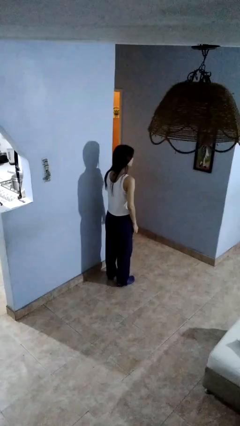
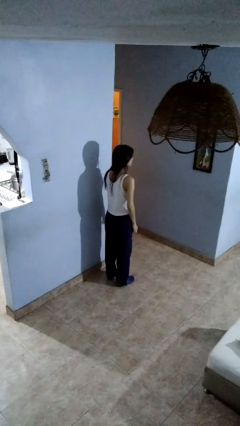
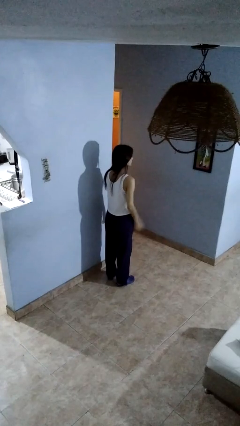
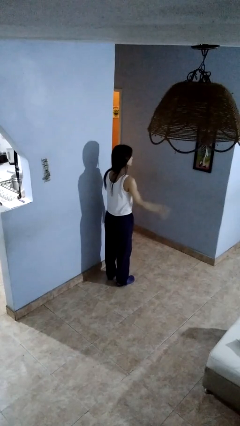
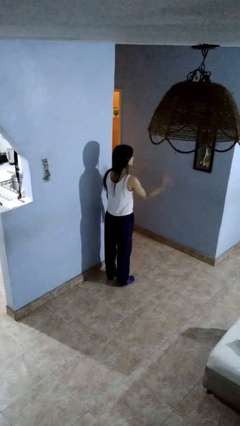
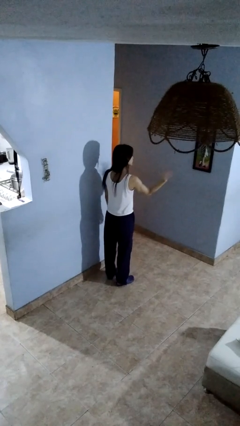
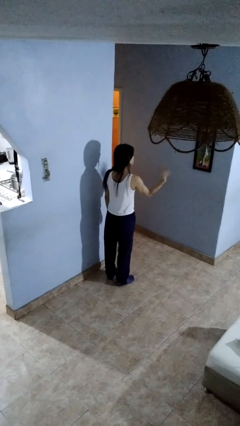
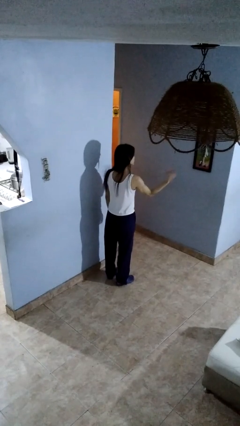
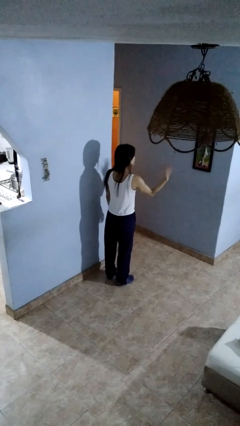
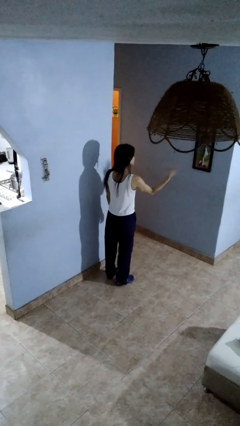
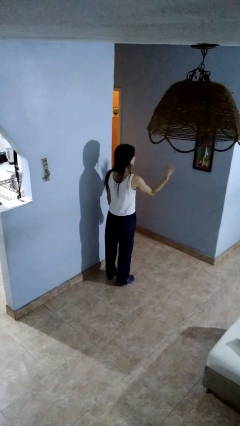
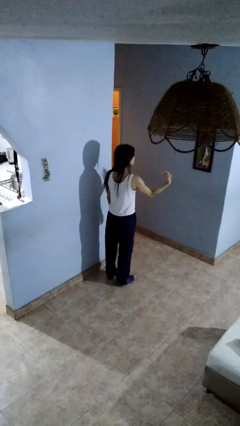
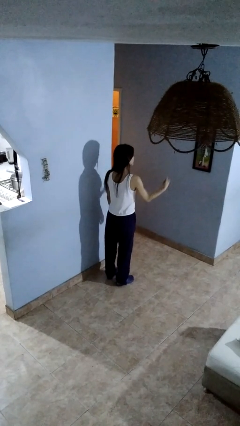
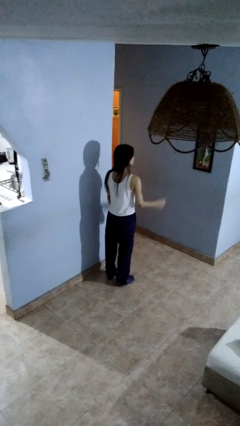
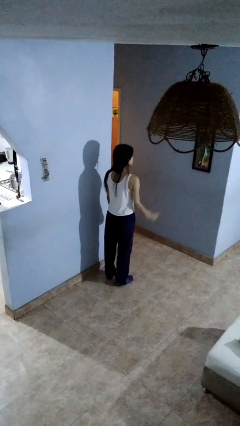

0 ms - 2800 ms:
person gestures come here

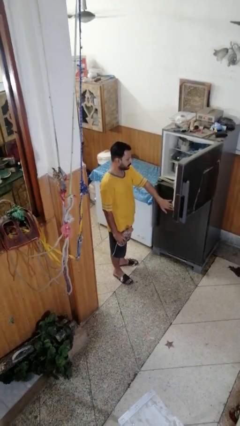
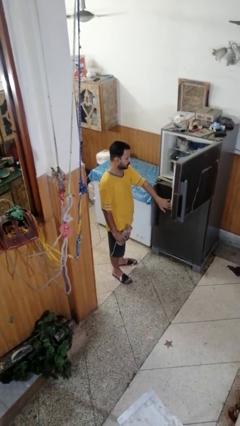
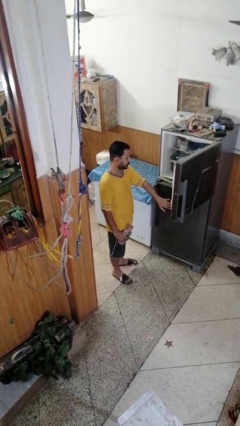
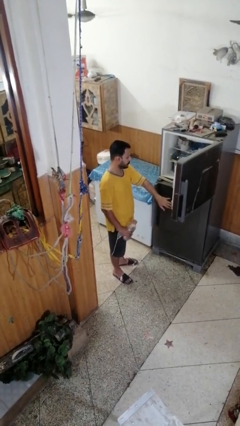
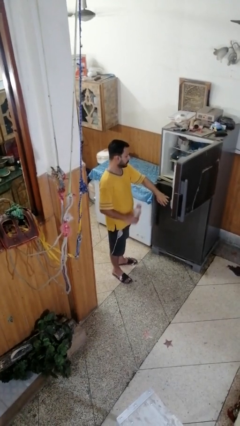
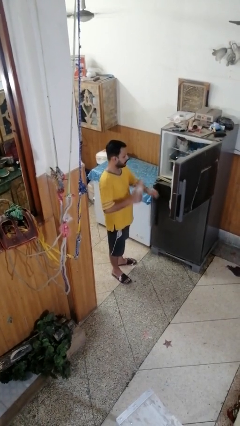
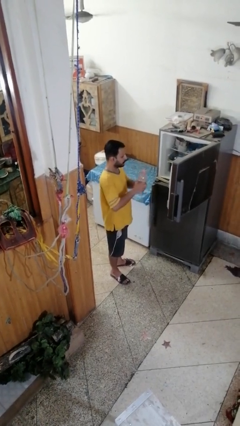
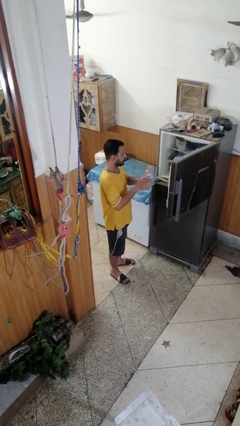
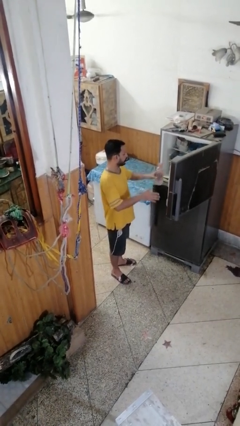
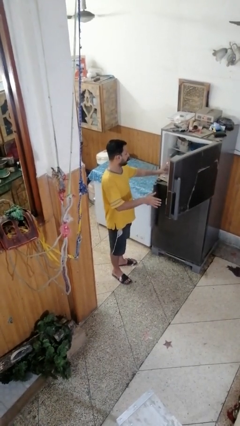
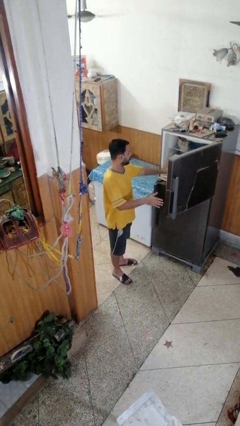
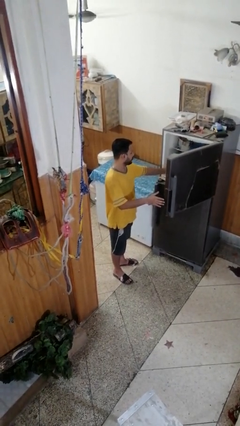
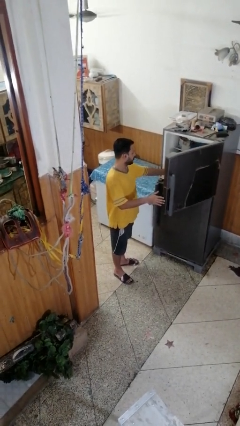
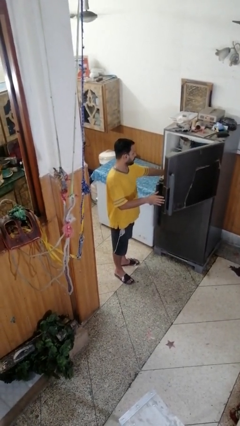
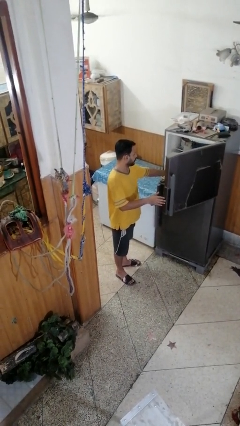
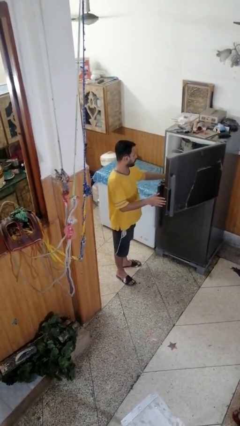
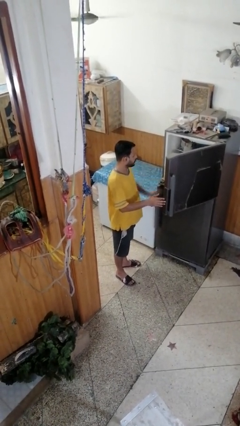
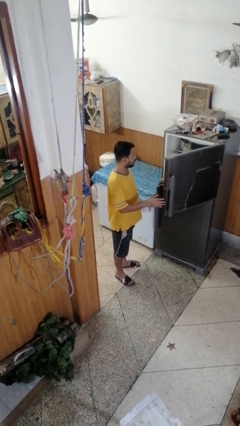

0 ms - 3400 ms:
person puts object into refrigerator

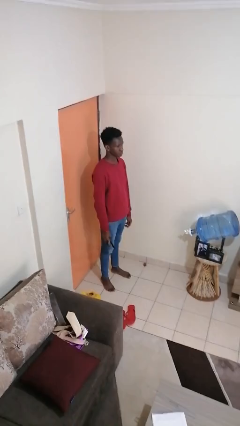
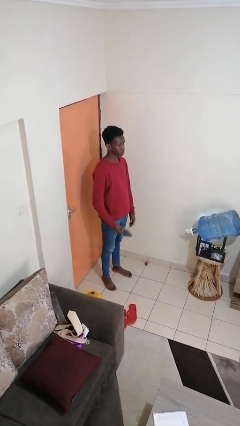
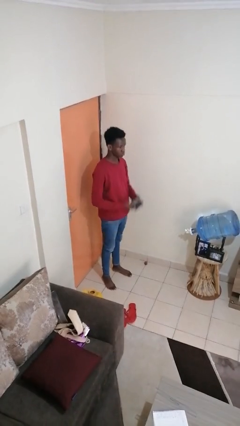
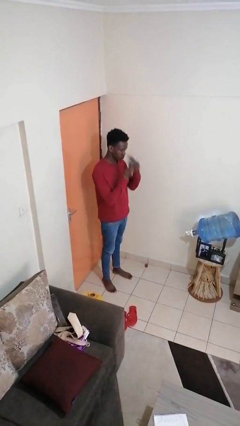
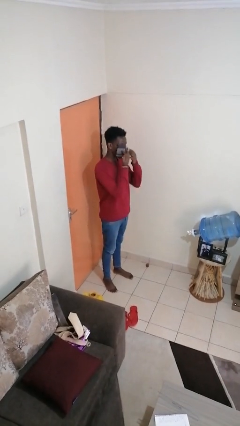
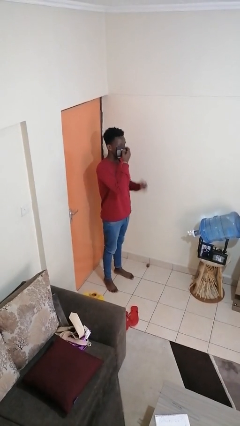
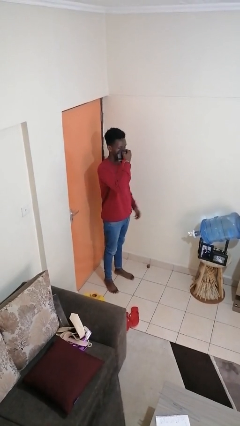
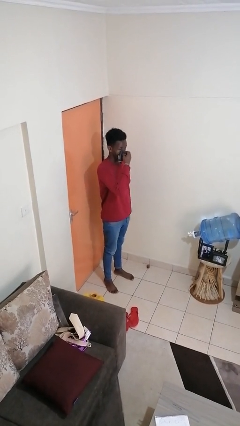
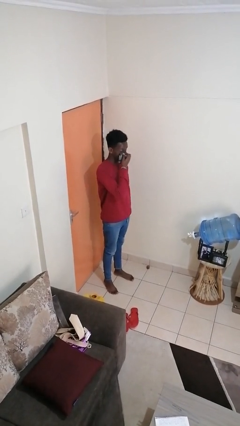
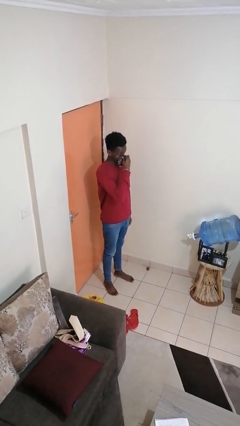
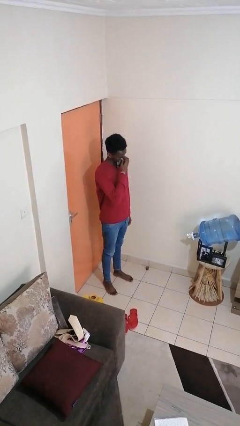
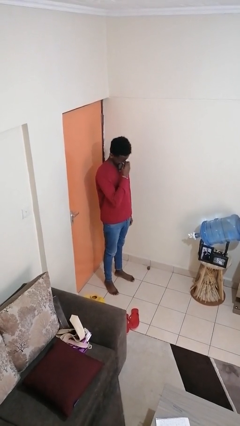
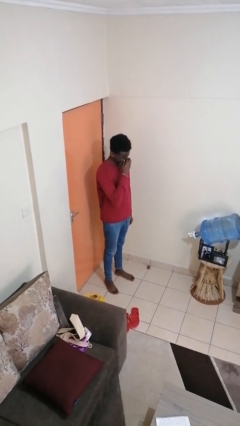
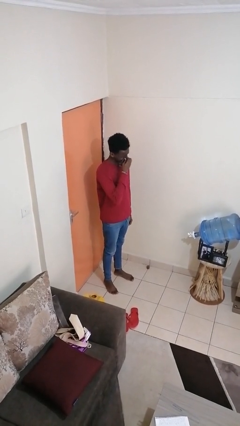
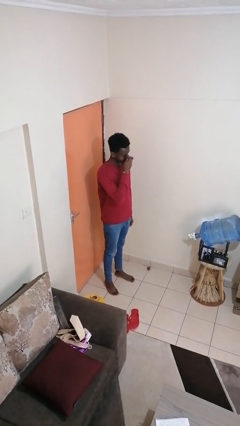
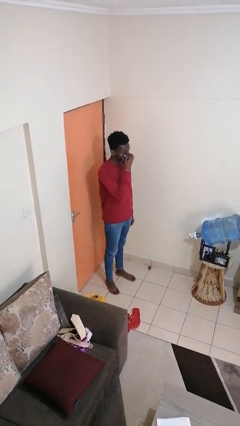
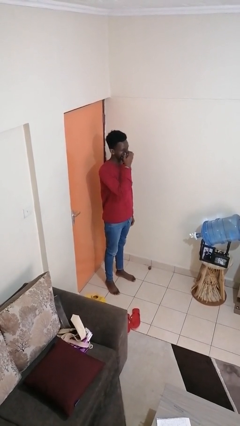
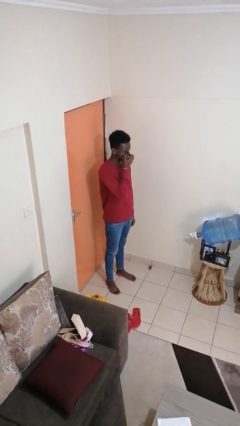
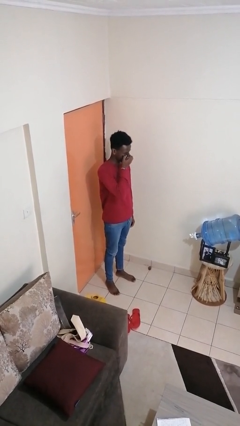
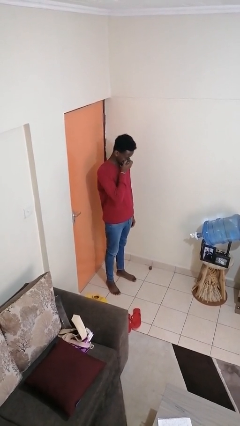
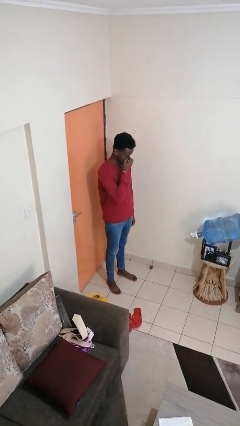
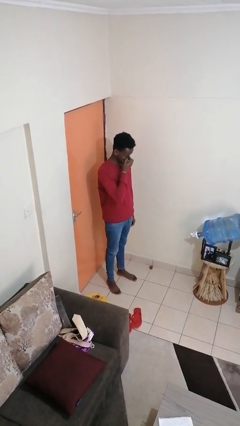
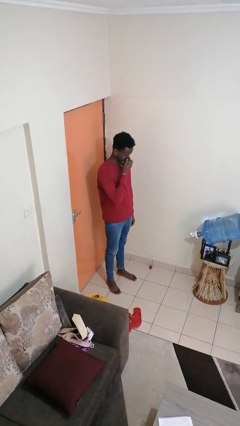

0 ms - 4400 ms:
person blows nose

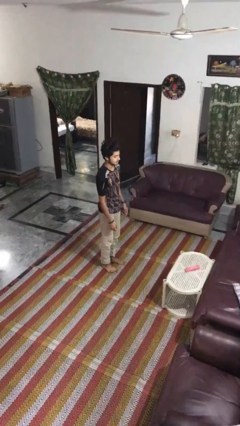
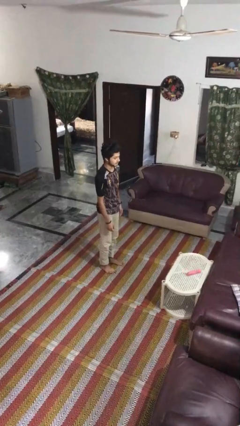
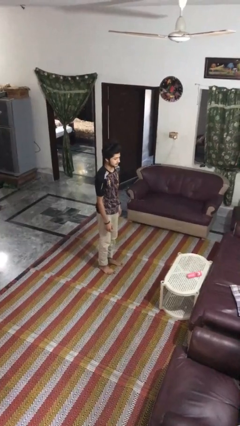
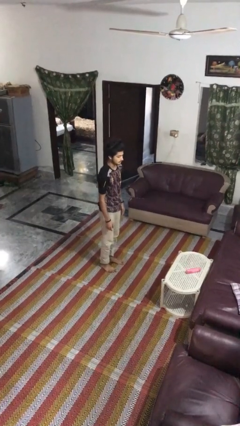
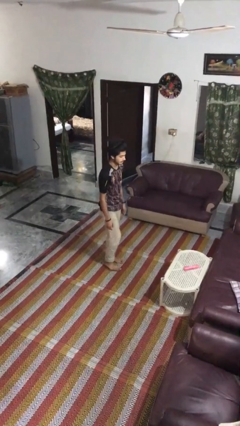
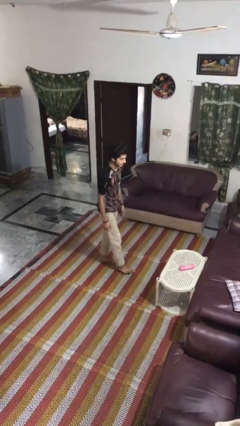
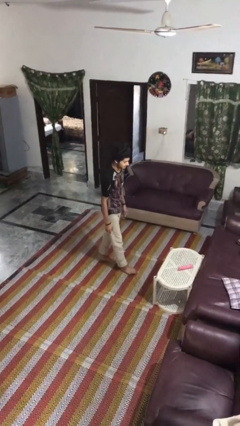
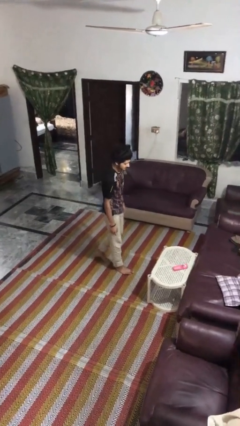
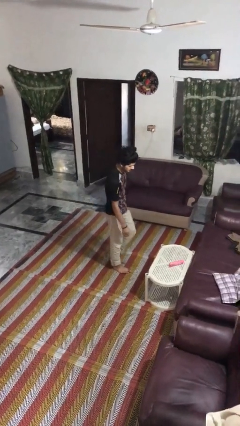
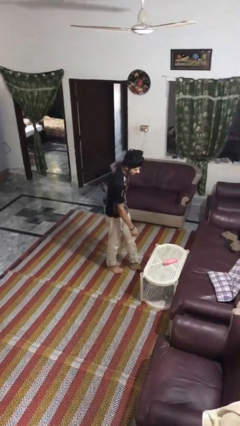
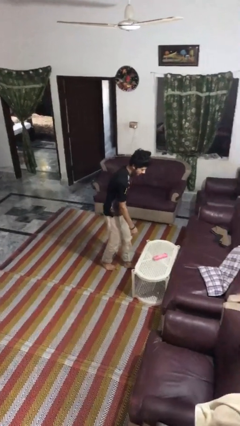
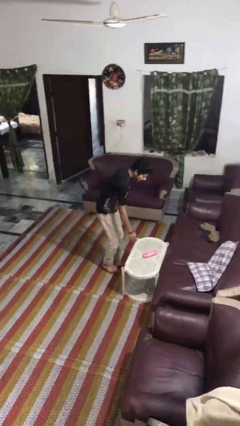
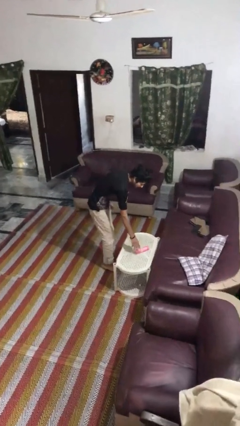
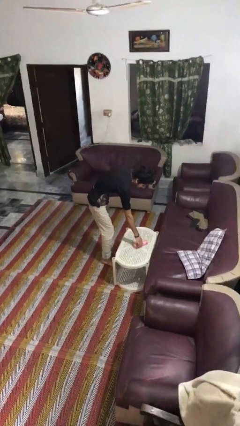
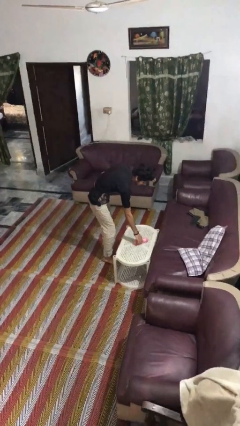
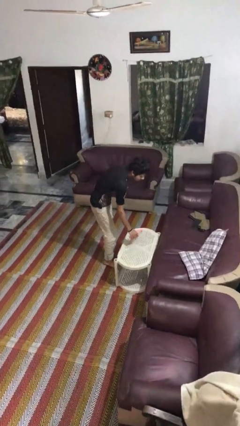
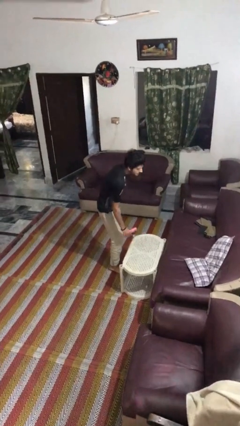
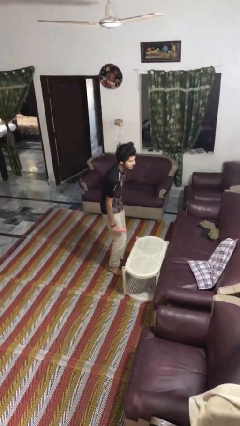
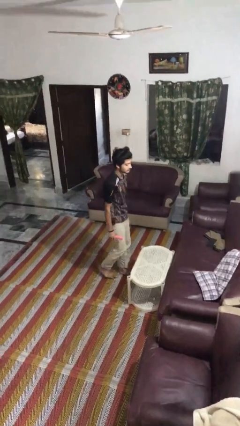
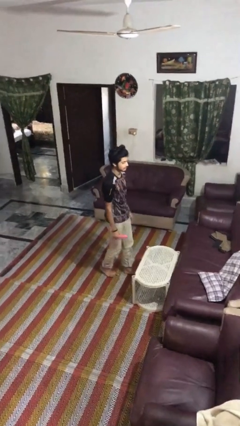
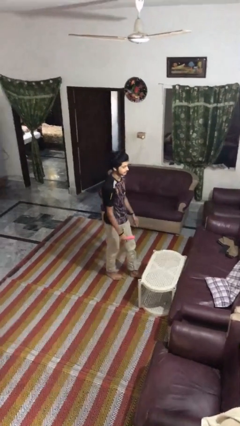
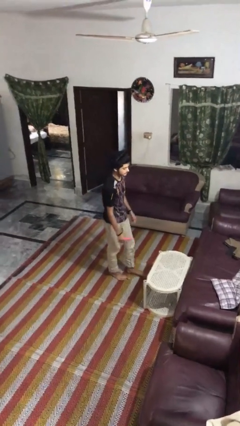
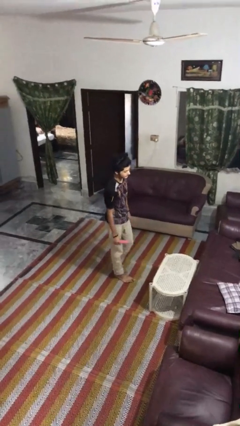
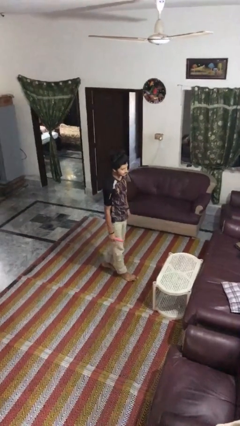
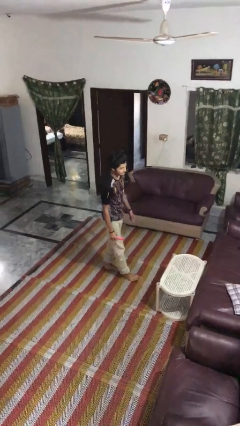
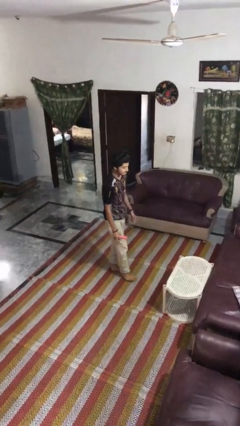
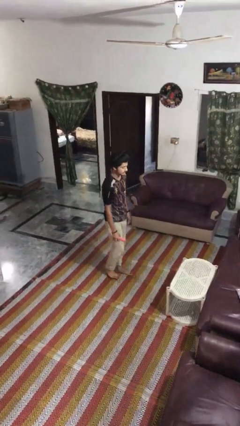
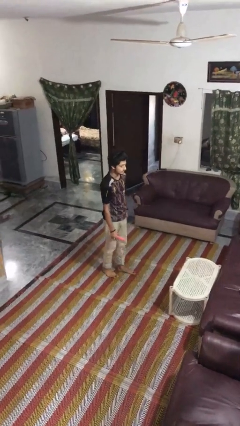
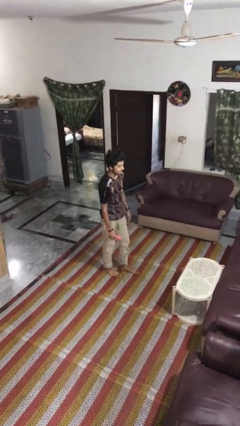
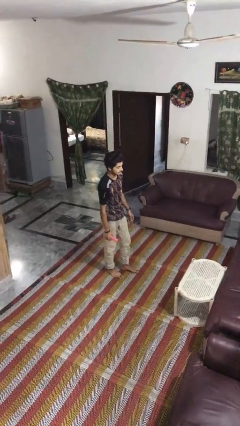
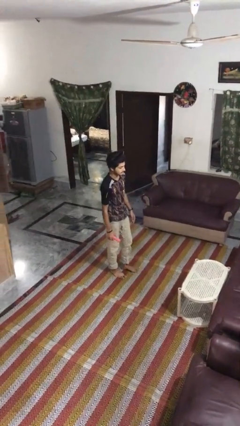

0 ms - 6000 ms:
person picks up object from table

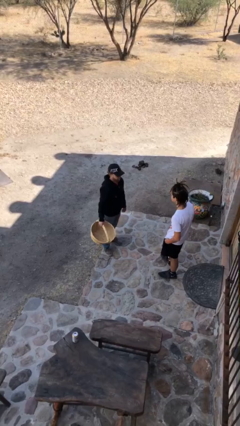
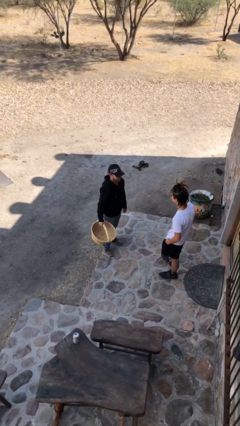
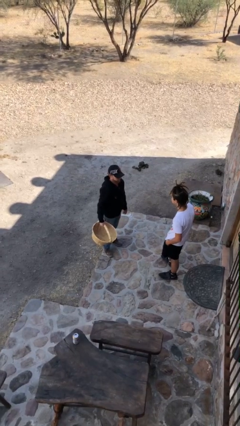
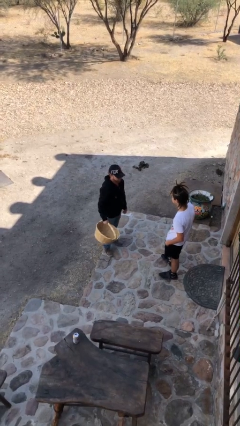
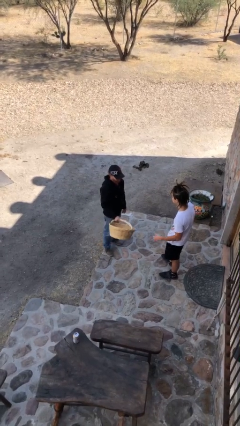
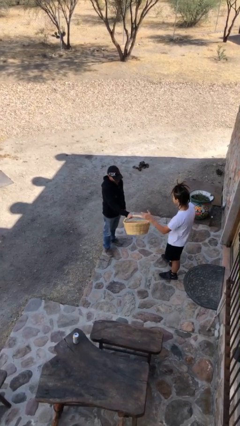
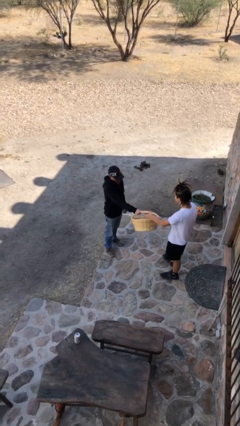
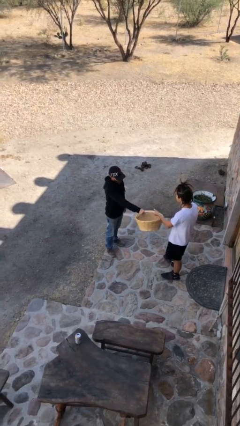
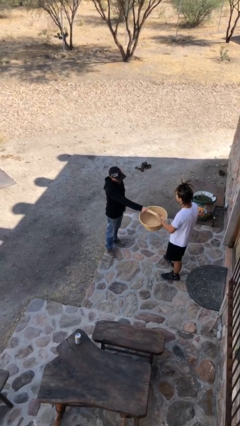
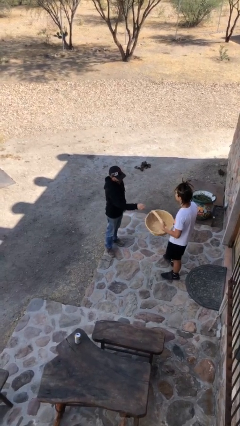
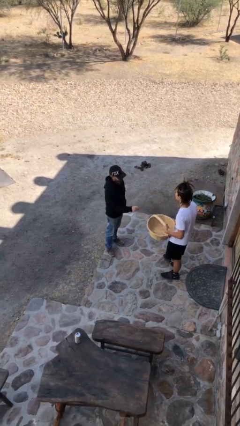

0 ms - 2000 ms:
person transfers object to person
